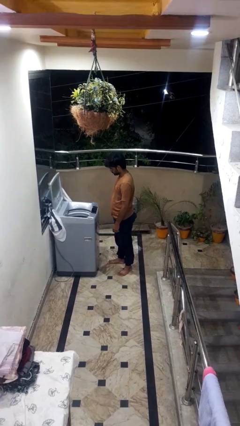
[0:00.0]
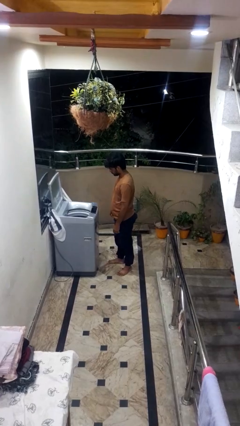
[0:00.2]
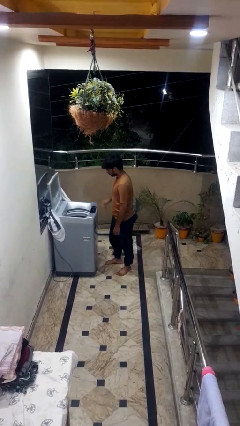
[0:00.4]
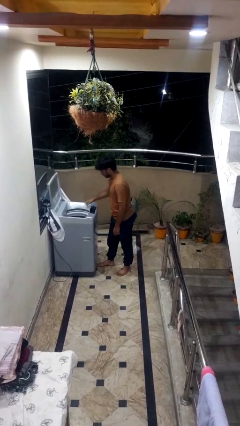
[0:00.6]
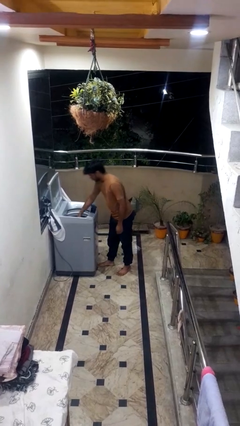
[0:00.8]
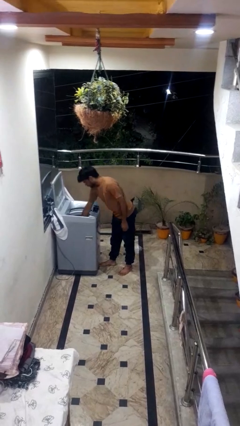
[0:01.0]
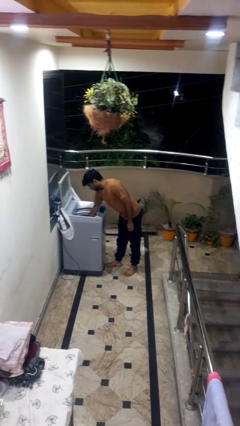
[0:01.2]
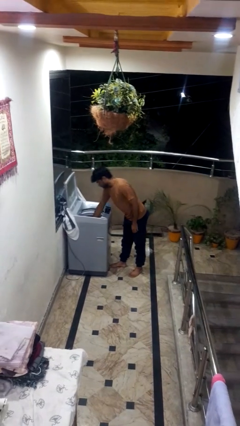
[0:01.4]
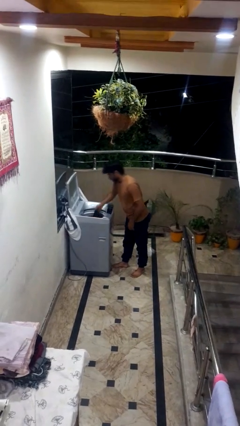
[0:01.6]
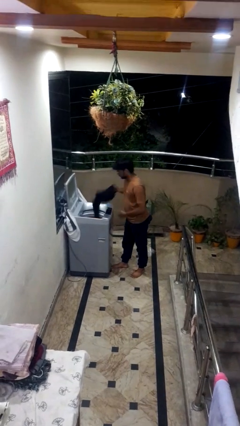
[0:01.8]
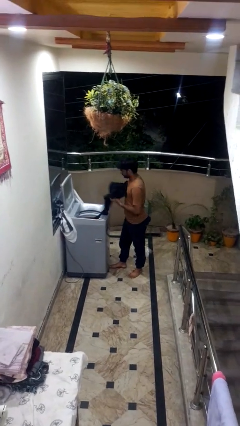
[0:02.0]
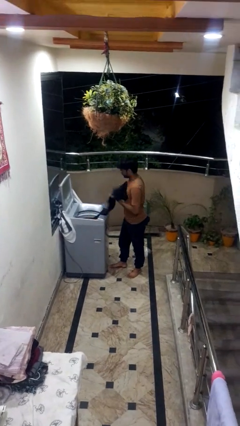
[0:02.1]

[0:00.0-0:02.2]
person loads clotheswasher

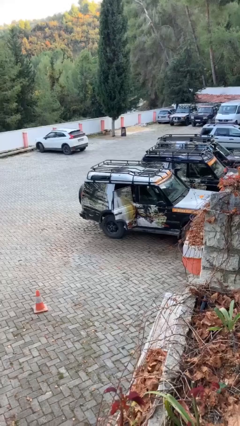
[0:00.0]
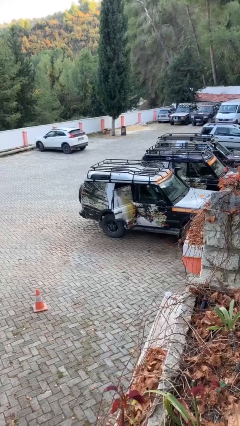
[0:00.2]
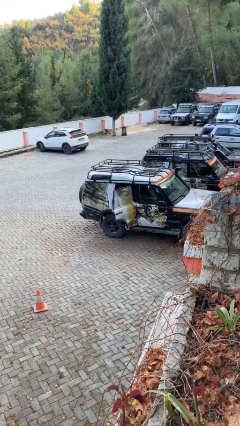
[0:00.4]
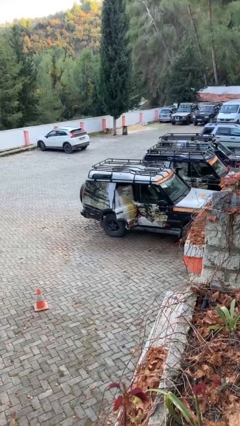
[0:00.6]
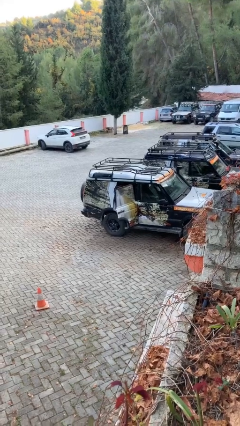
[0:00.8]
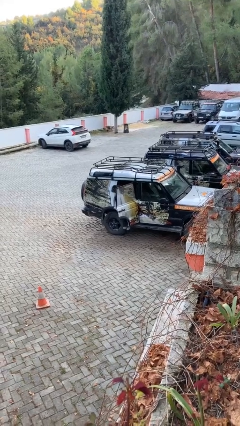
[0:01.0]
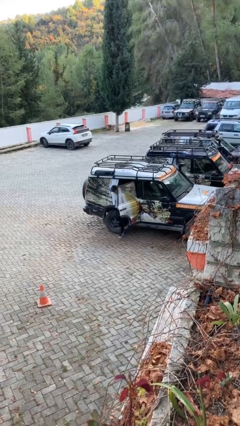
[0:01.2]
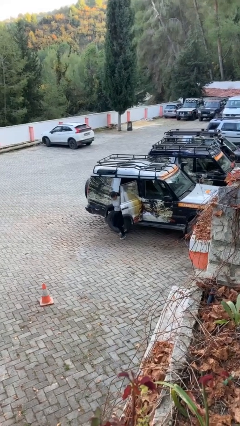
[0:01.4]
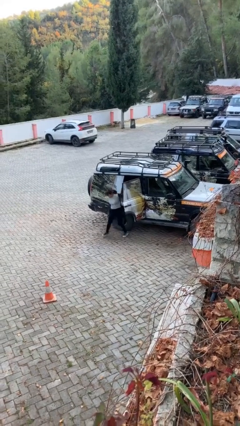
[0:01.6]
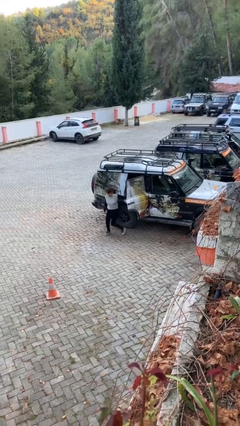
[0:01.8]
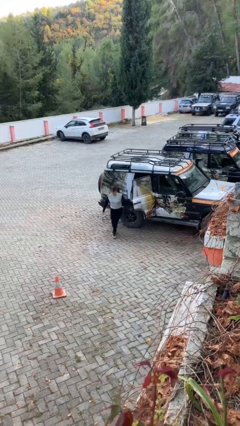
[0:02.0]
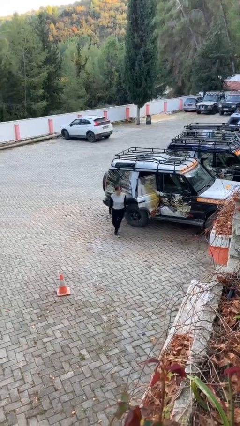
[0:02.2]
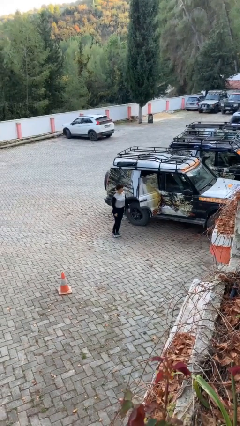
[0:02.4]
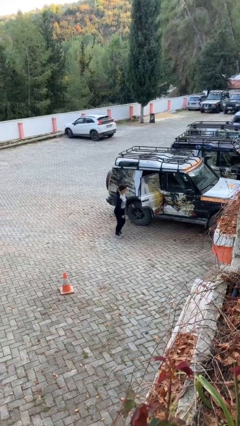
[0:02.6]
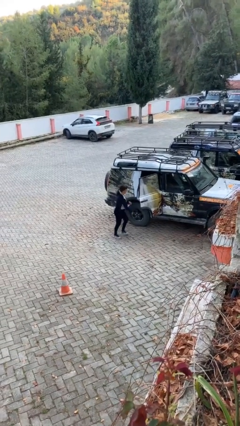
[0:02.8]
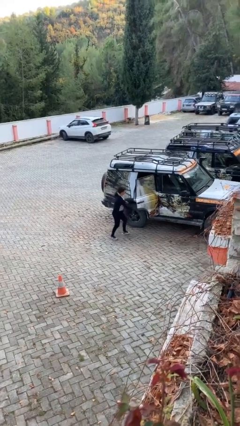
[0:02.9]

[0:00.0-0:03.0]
person exits car

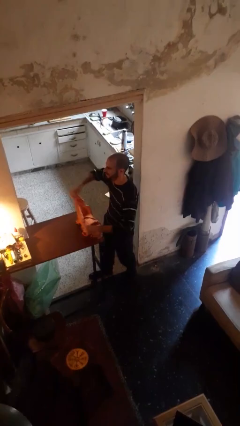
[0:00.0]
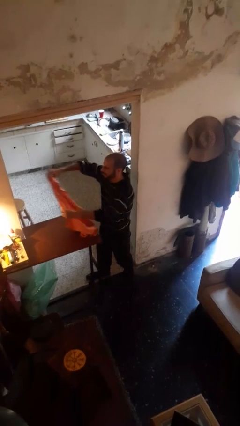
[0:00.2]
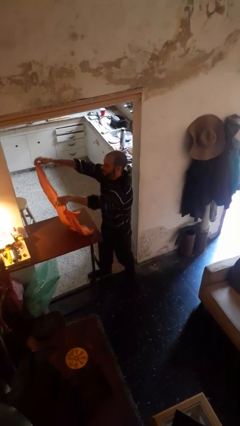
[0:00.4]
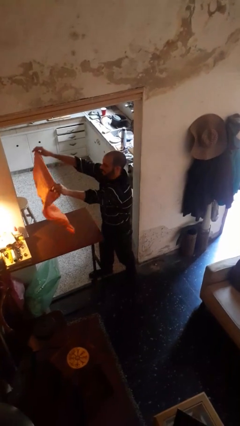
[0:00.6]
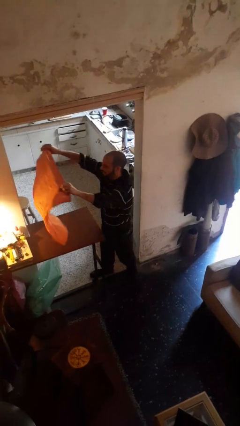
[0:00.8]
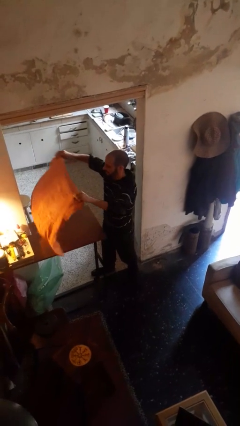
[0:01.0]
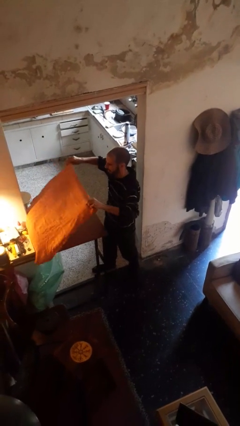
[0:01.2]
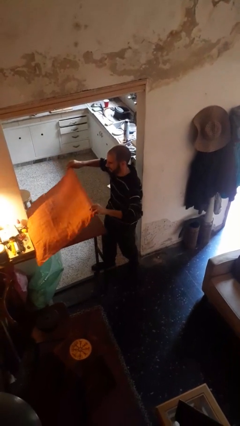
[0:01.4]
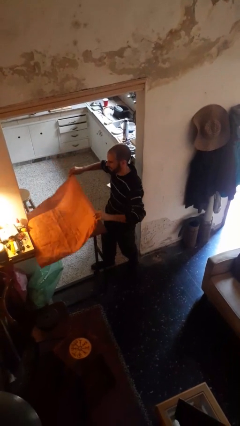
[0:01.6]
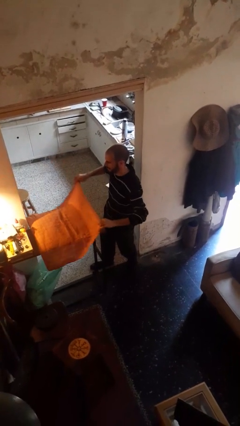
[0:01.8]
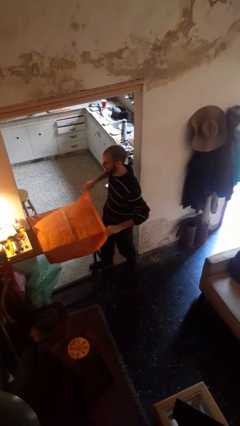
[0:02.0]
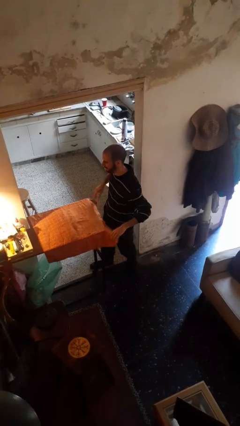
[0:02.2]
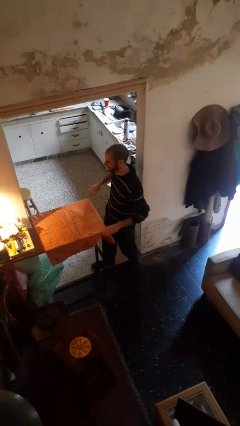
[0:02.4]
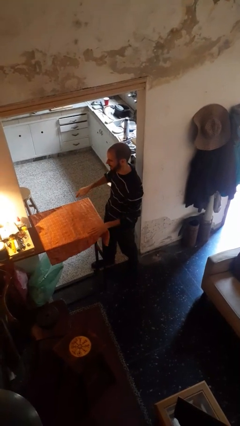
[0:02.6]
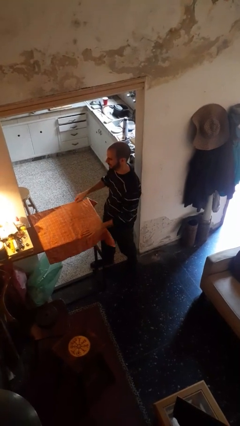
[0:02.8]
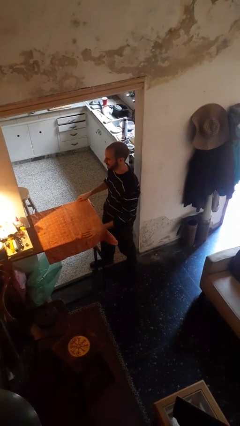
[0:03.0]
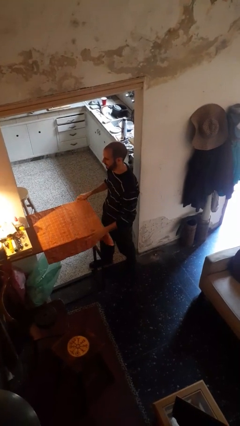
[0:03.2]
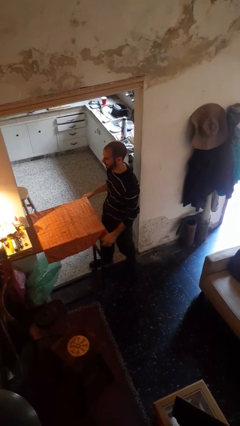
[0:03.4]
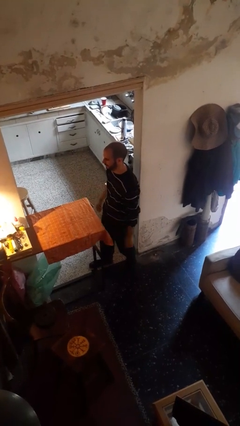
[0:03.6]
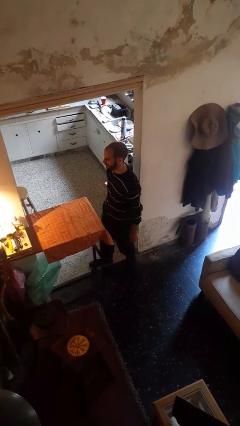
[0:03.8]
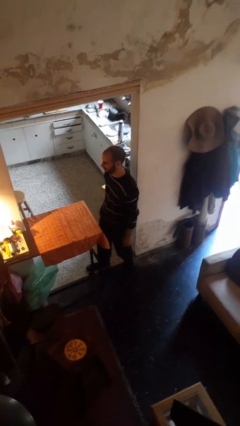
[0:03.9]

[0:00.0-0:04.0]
person spreads tablecloth

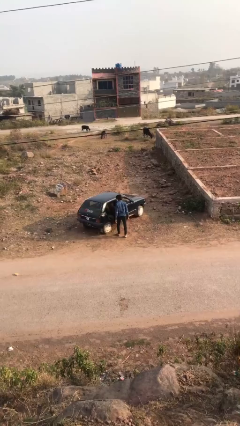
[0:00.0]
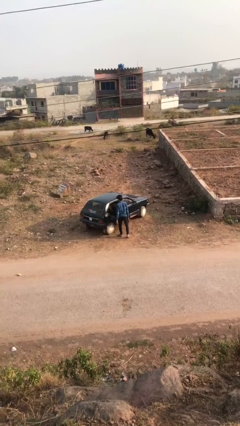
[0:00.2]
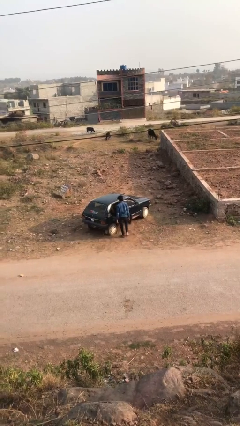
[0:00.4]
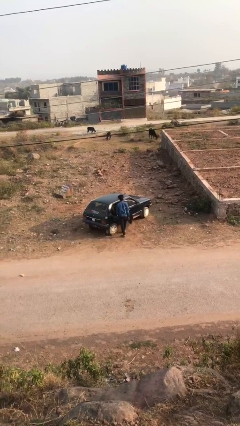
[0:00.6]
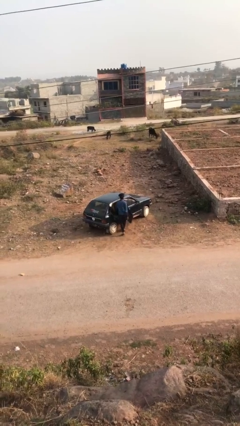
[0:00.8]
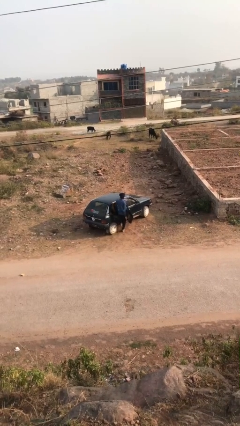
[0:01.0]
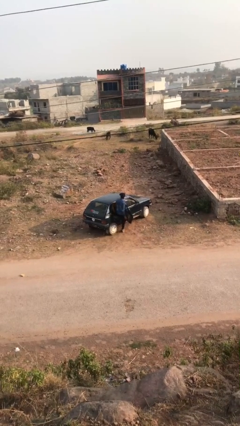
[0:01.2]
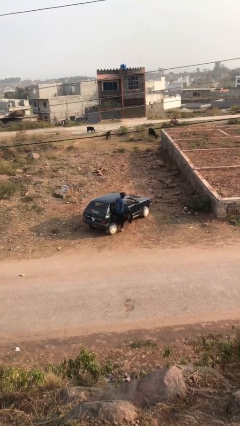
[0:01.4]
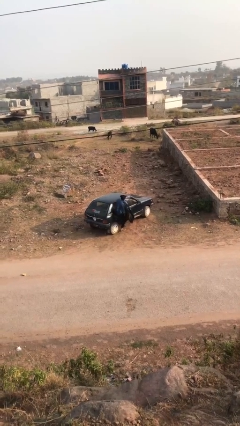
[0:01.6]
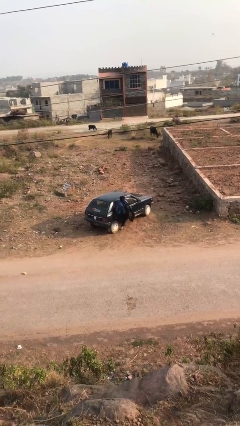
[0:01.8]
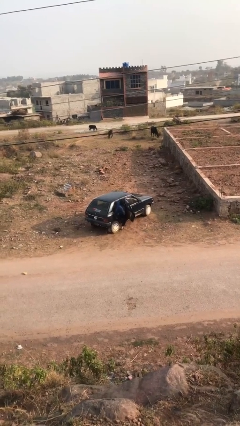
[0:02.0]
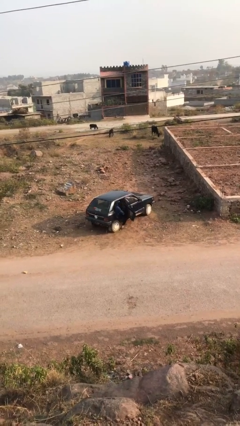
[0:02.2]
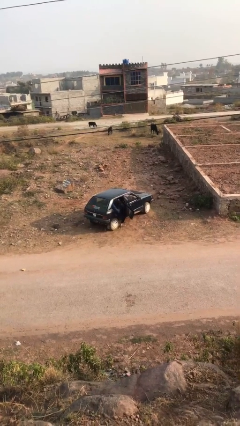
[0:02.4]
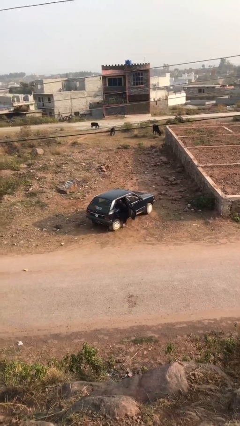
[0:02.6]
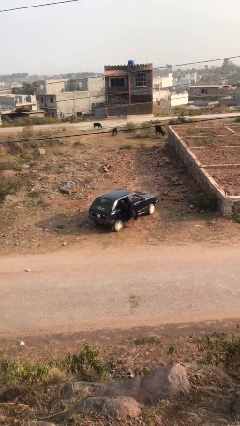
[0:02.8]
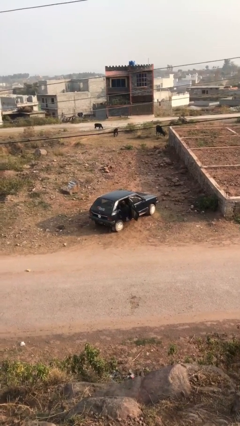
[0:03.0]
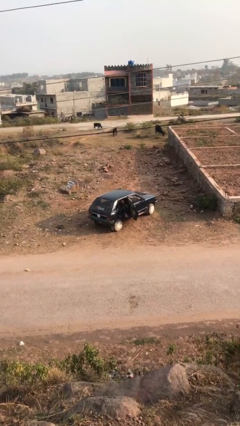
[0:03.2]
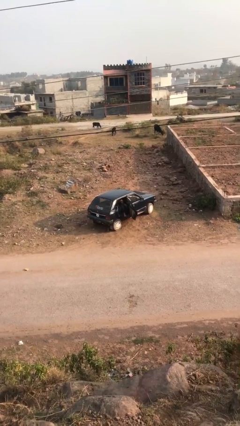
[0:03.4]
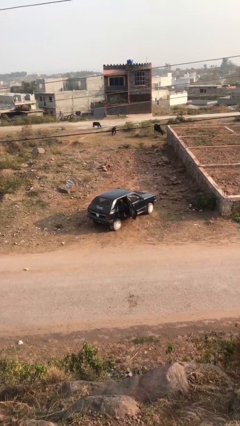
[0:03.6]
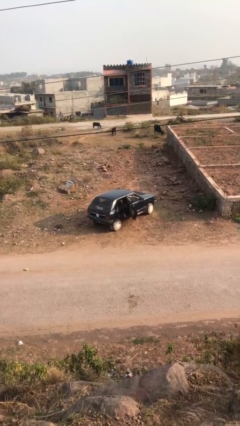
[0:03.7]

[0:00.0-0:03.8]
person enters car

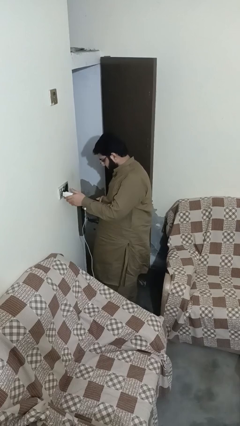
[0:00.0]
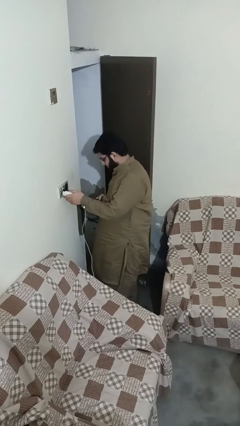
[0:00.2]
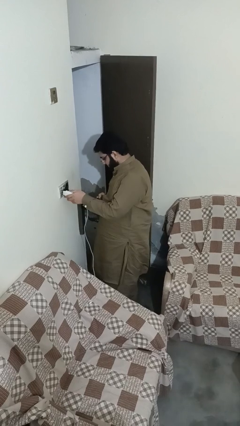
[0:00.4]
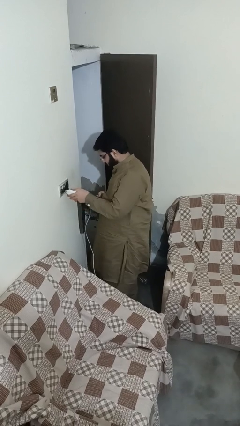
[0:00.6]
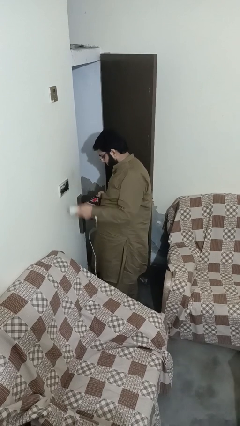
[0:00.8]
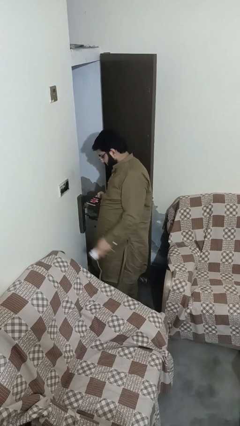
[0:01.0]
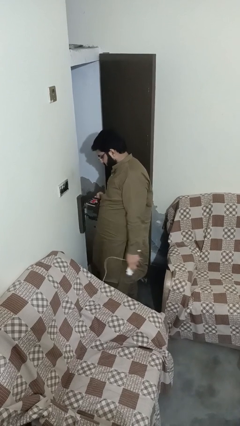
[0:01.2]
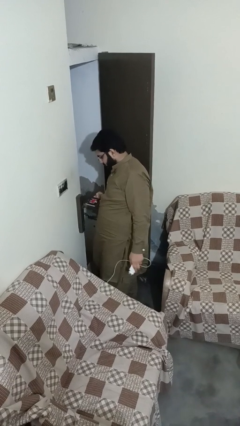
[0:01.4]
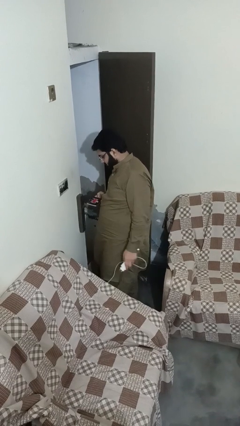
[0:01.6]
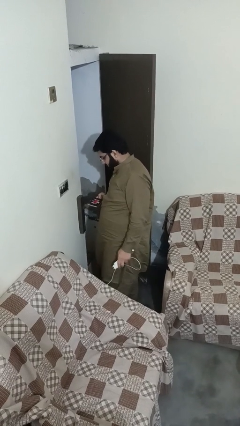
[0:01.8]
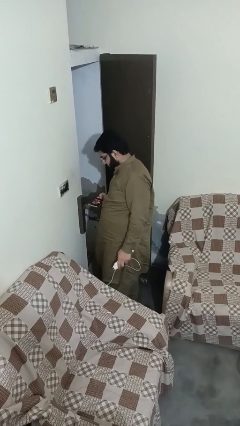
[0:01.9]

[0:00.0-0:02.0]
person unplugs from electrical socket

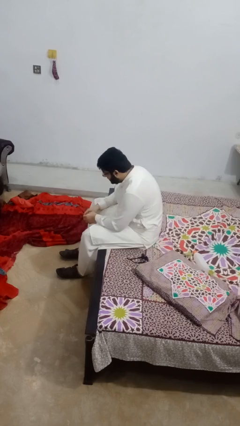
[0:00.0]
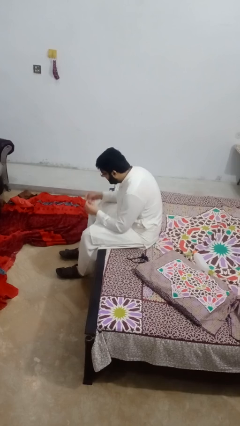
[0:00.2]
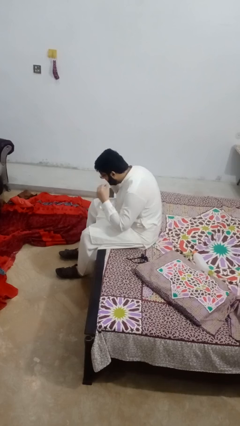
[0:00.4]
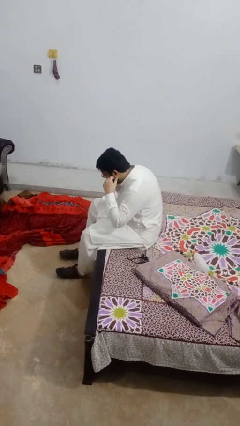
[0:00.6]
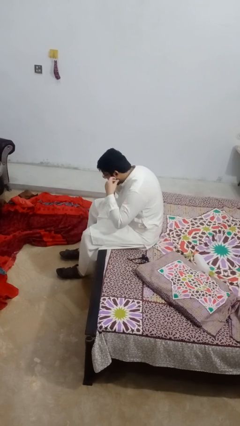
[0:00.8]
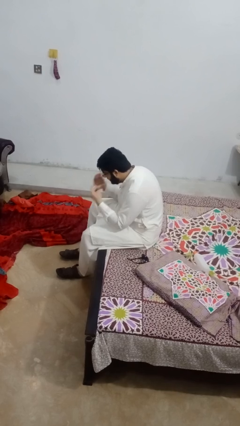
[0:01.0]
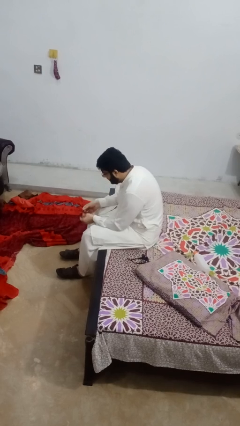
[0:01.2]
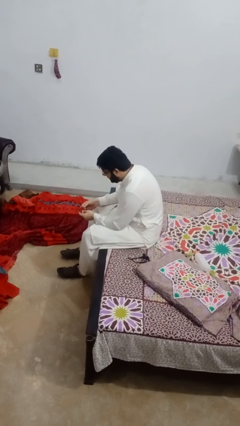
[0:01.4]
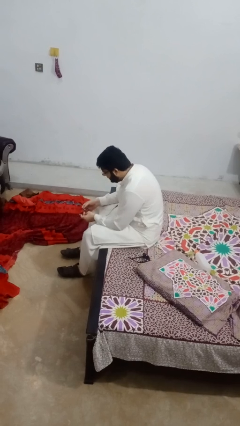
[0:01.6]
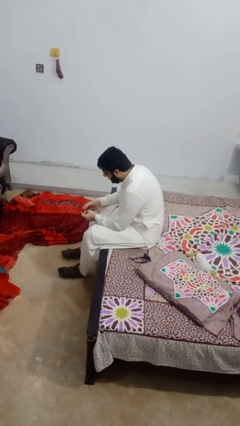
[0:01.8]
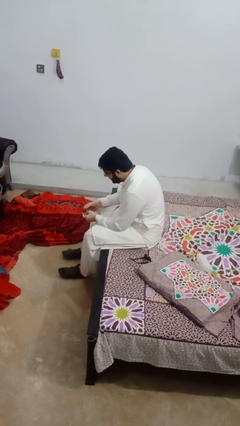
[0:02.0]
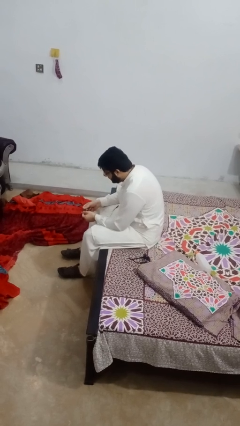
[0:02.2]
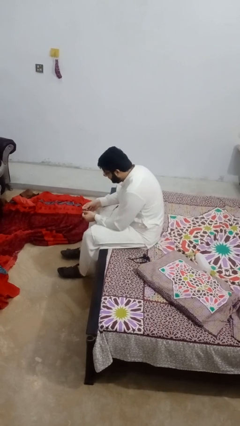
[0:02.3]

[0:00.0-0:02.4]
person takes off headphones
